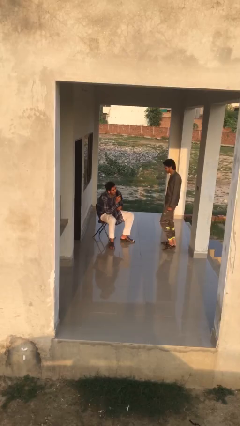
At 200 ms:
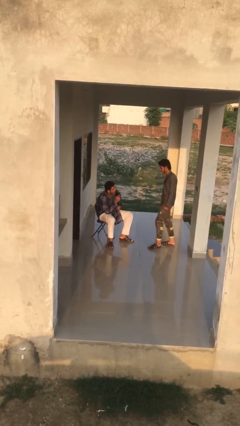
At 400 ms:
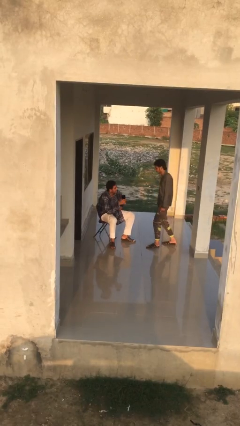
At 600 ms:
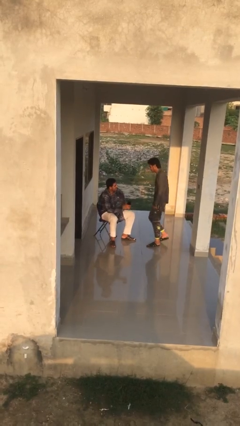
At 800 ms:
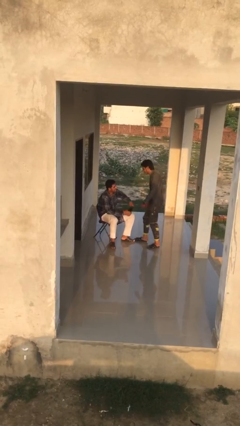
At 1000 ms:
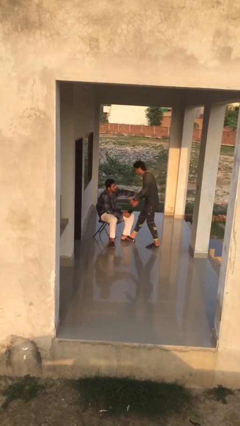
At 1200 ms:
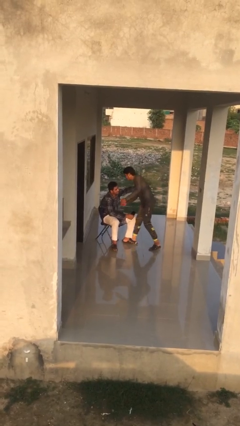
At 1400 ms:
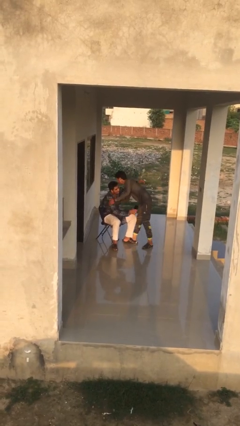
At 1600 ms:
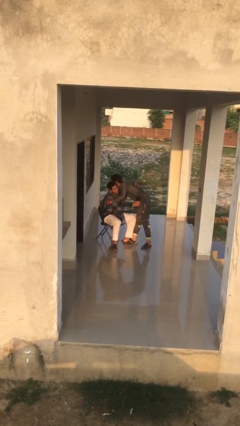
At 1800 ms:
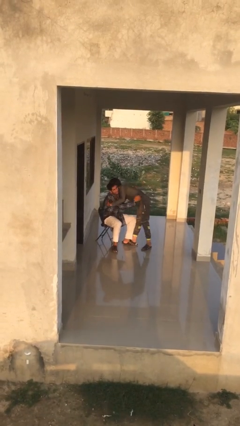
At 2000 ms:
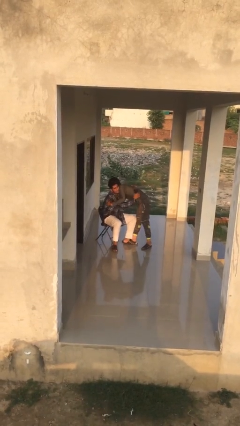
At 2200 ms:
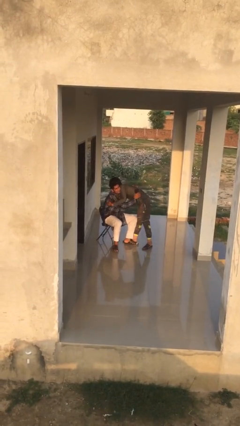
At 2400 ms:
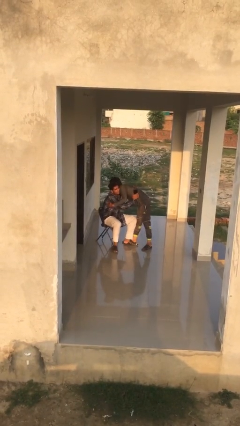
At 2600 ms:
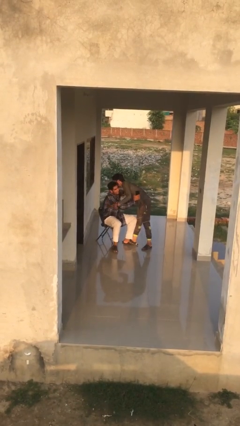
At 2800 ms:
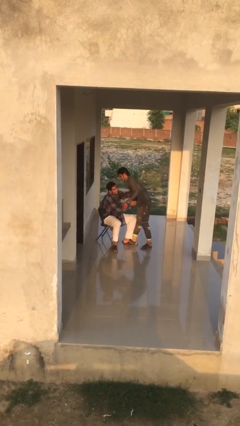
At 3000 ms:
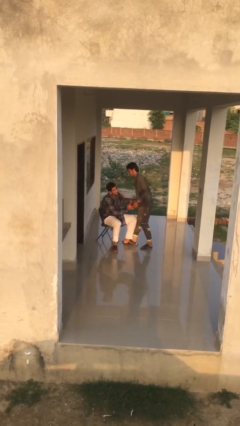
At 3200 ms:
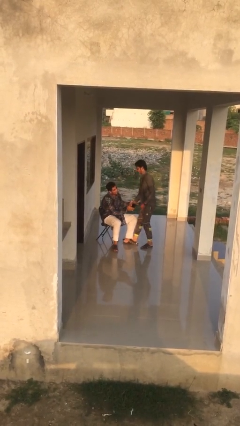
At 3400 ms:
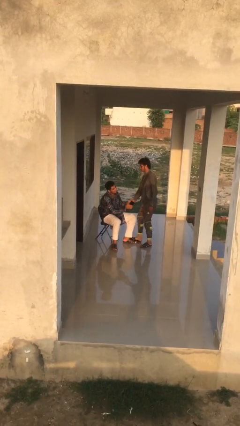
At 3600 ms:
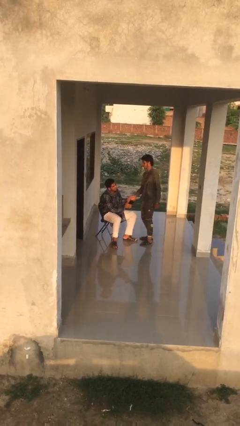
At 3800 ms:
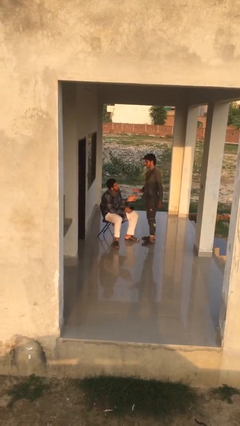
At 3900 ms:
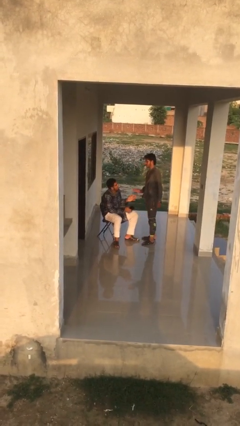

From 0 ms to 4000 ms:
person embraces person

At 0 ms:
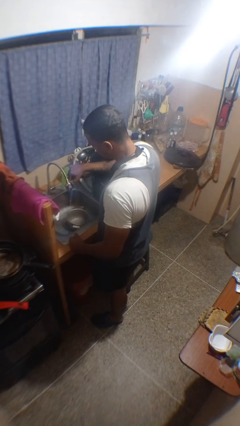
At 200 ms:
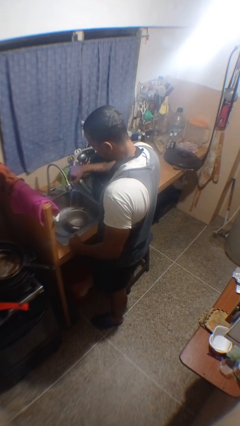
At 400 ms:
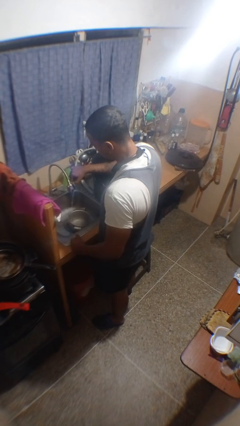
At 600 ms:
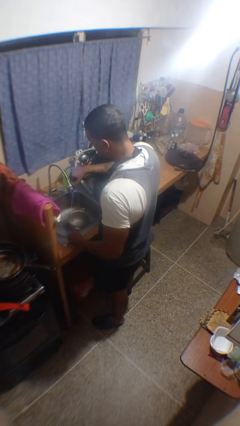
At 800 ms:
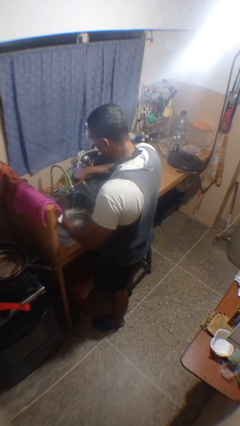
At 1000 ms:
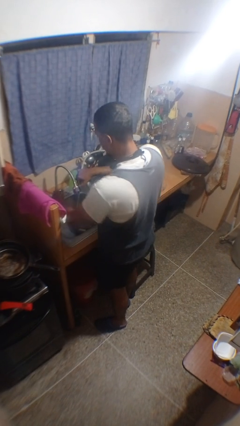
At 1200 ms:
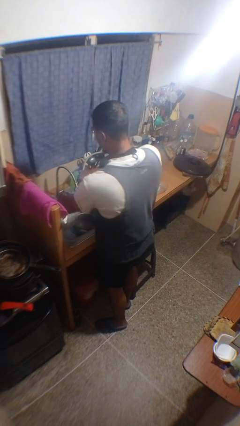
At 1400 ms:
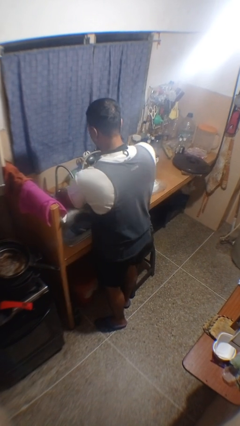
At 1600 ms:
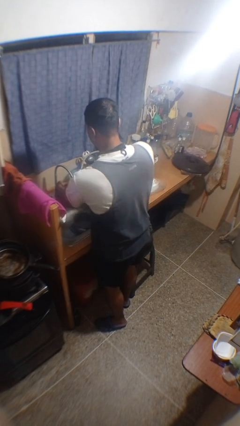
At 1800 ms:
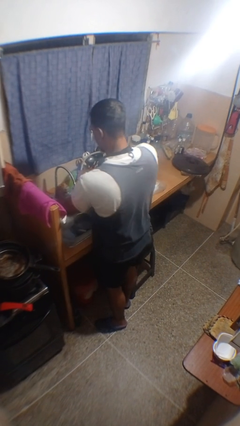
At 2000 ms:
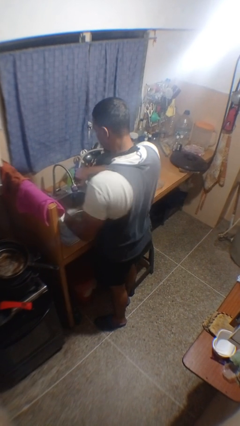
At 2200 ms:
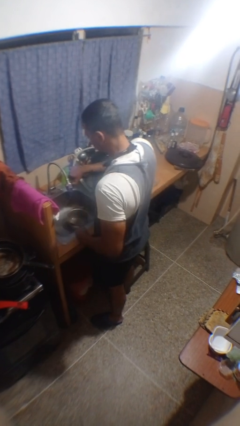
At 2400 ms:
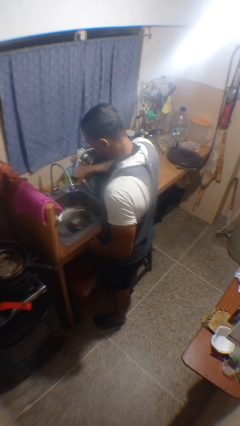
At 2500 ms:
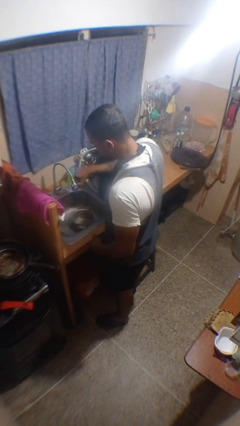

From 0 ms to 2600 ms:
person turns off faucet

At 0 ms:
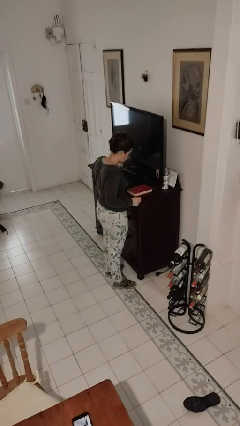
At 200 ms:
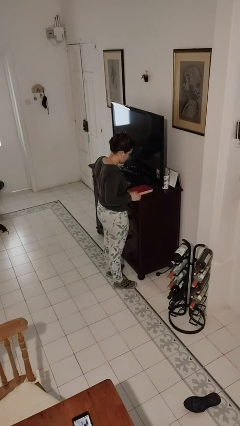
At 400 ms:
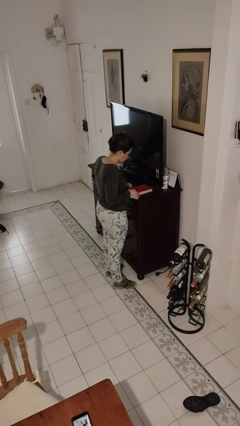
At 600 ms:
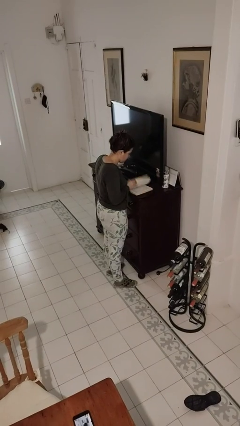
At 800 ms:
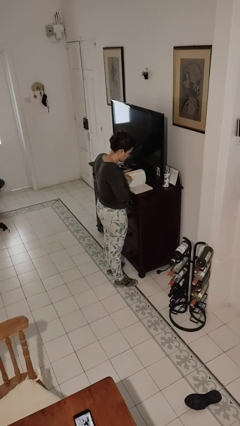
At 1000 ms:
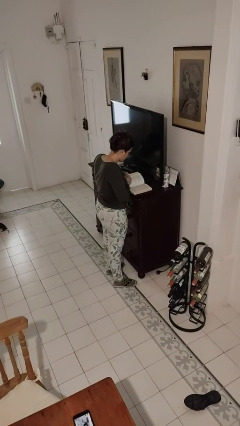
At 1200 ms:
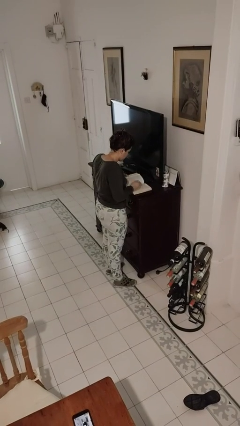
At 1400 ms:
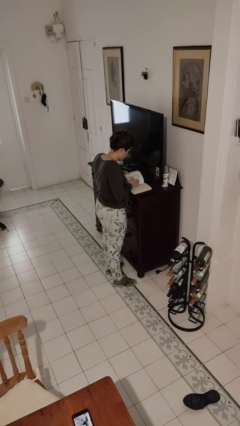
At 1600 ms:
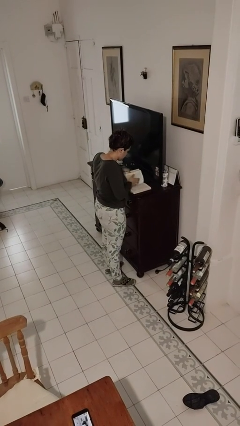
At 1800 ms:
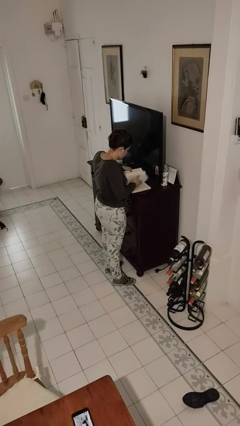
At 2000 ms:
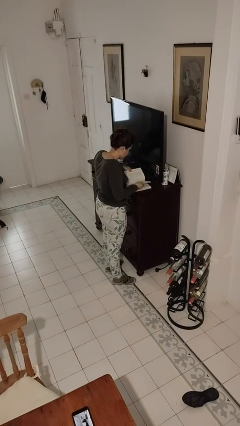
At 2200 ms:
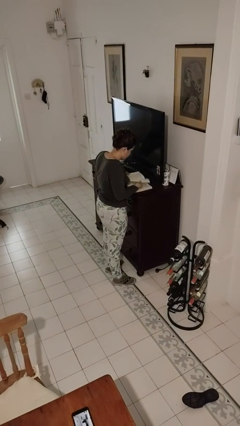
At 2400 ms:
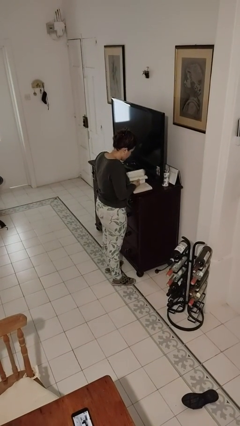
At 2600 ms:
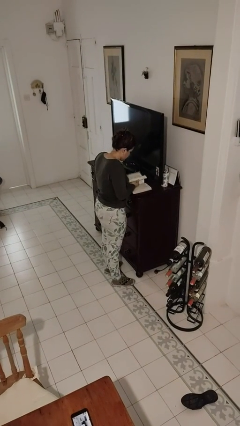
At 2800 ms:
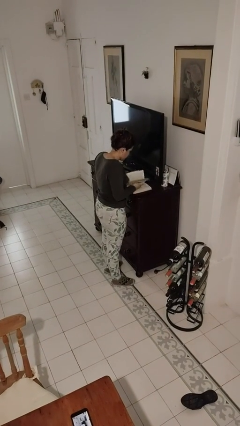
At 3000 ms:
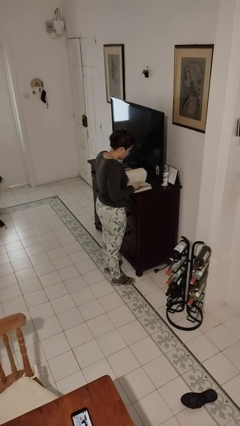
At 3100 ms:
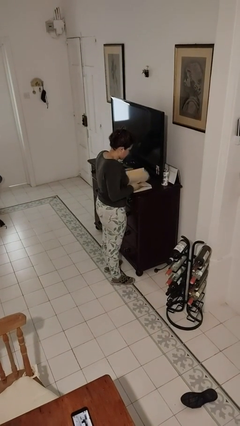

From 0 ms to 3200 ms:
person reads book

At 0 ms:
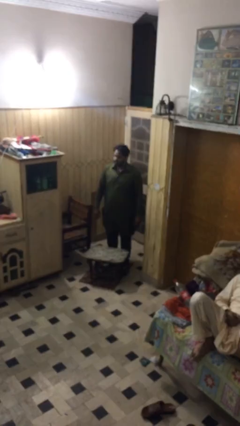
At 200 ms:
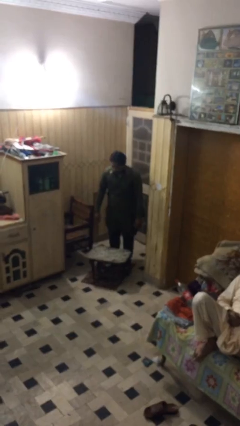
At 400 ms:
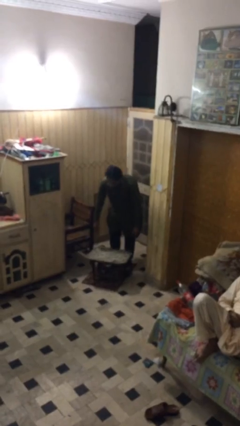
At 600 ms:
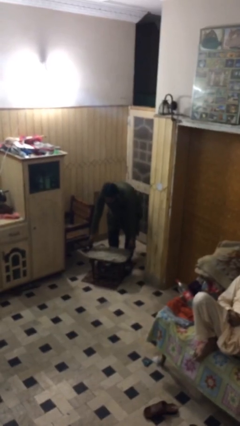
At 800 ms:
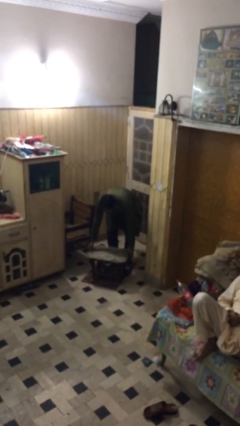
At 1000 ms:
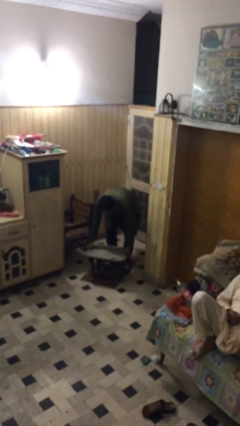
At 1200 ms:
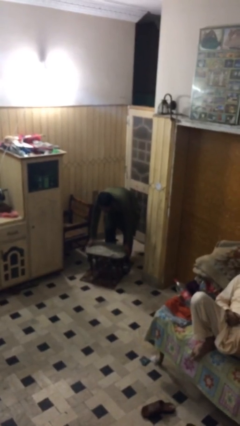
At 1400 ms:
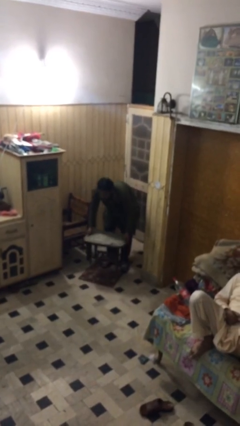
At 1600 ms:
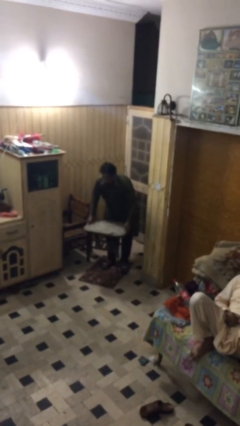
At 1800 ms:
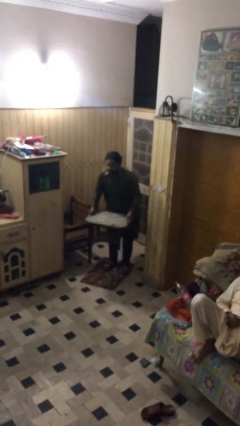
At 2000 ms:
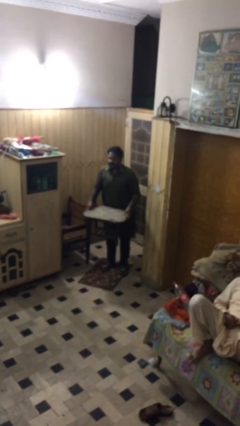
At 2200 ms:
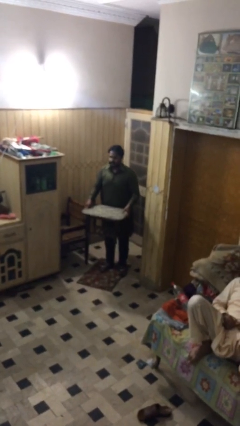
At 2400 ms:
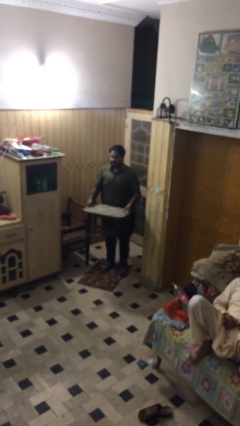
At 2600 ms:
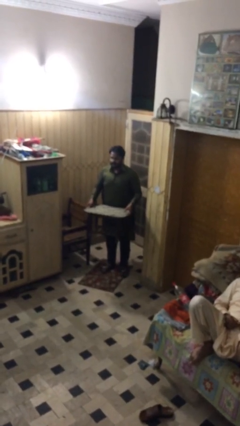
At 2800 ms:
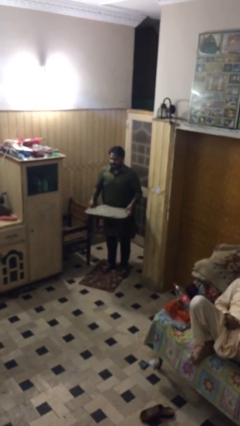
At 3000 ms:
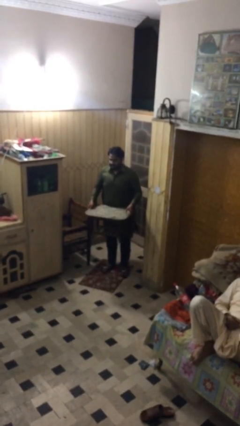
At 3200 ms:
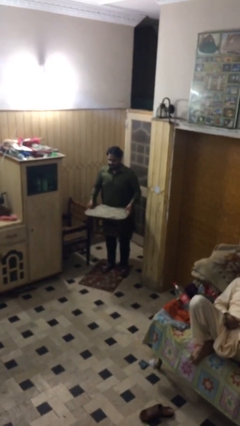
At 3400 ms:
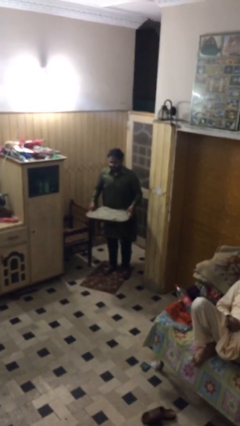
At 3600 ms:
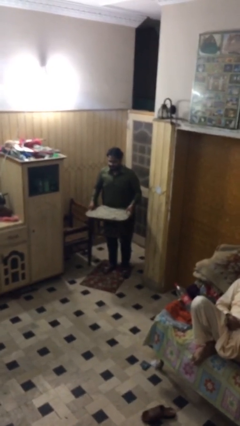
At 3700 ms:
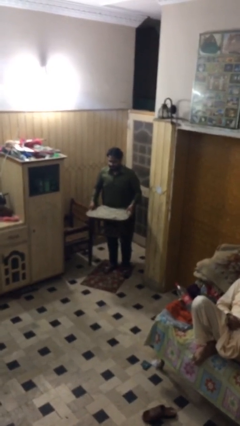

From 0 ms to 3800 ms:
person picks up object from floor

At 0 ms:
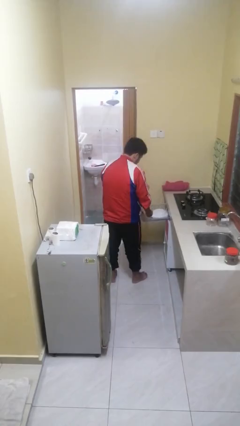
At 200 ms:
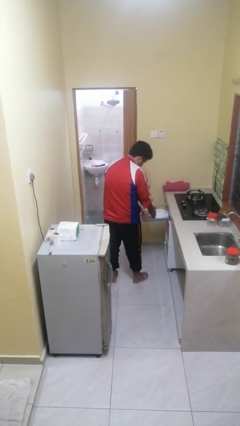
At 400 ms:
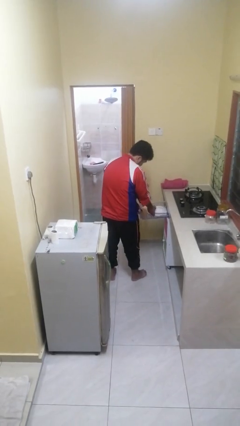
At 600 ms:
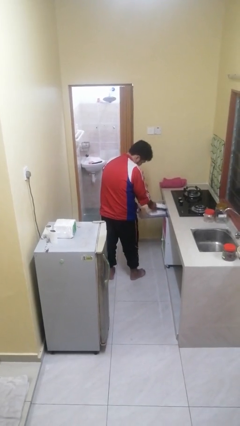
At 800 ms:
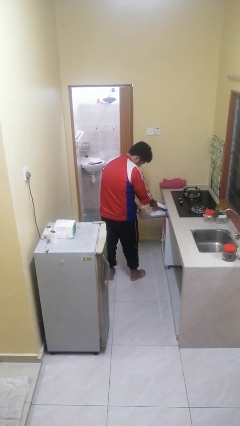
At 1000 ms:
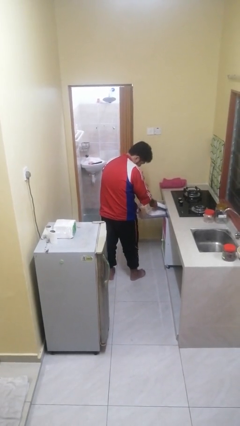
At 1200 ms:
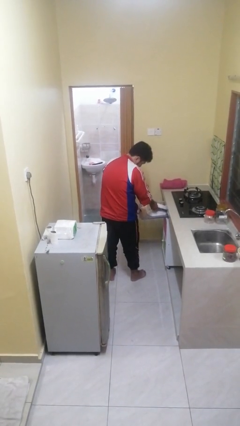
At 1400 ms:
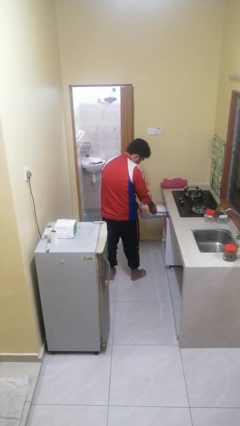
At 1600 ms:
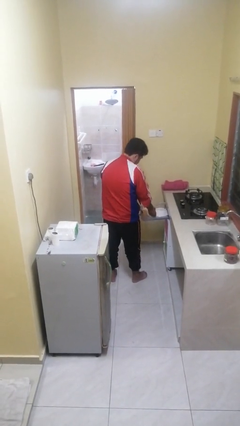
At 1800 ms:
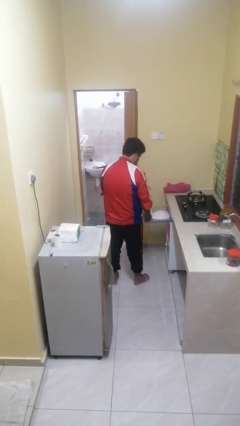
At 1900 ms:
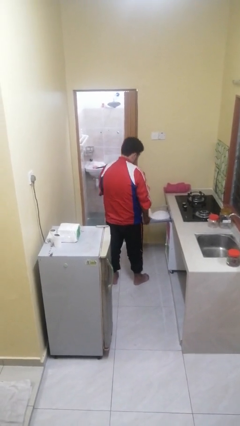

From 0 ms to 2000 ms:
person searches in kitchen drawer

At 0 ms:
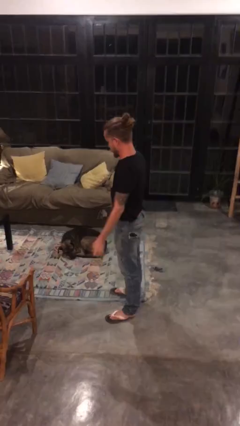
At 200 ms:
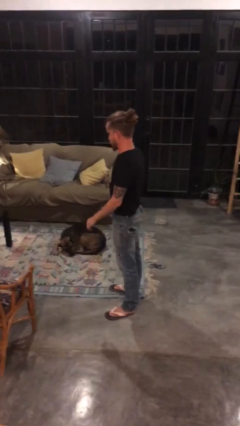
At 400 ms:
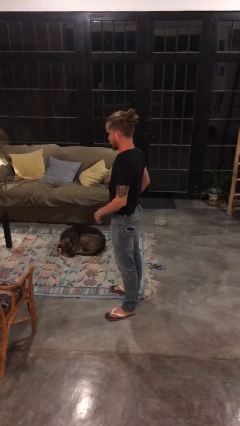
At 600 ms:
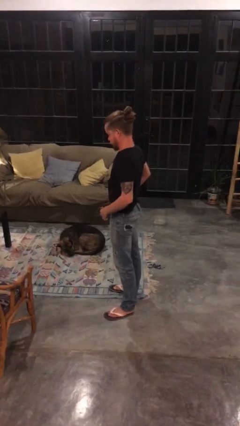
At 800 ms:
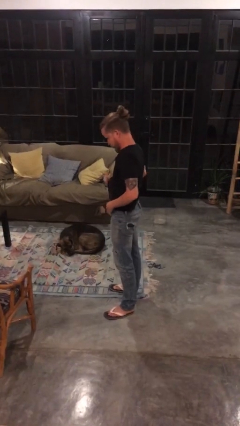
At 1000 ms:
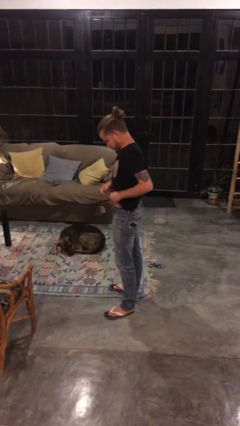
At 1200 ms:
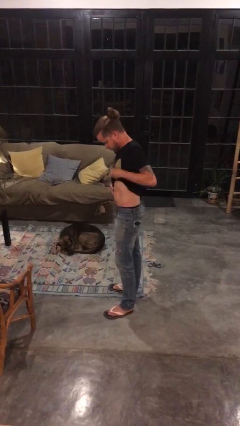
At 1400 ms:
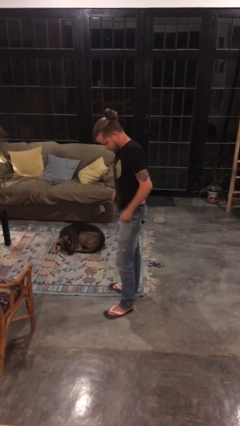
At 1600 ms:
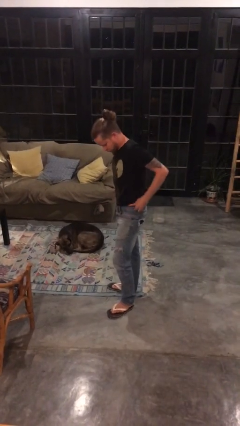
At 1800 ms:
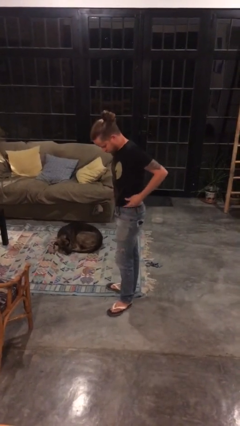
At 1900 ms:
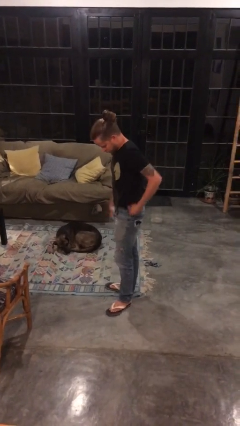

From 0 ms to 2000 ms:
person untucks shirt
